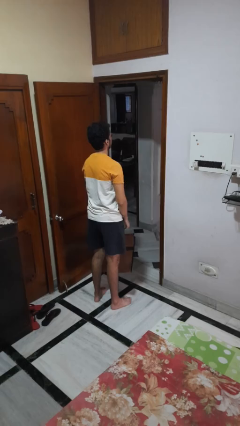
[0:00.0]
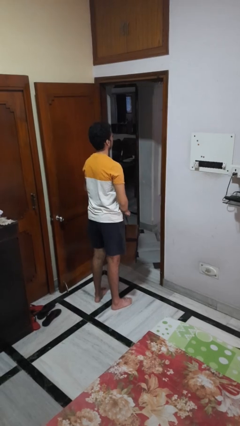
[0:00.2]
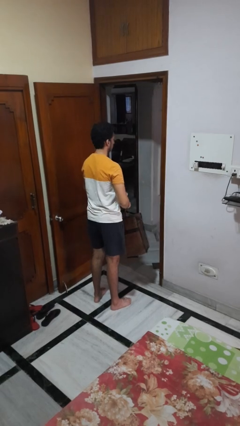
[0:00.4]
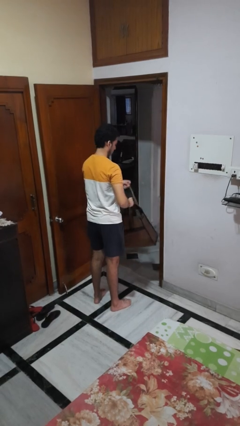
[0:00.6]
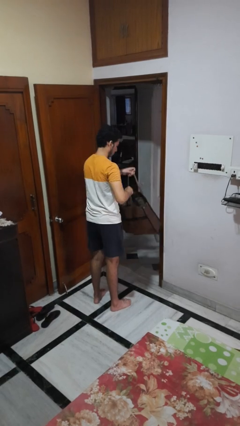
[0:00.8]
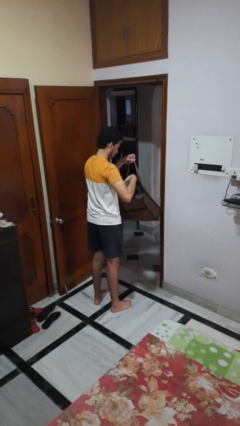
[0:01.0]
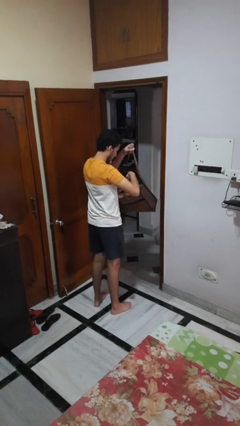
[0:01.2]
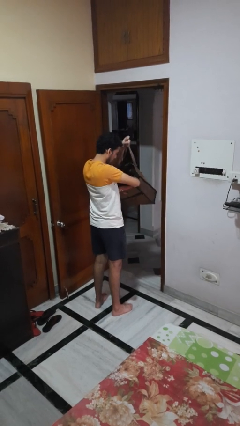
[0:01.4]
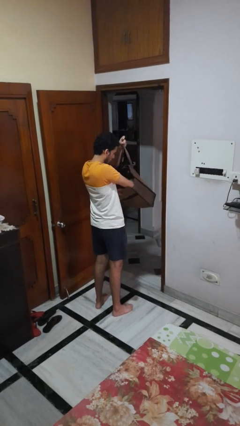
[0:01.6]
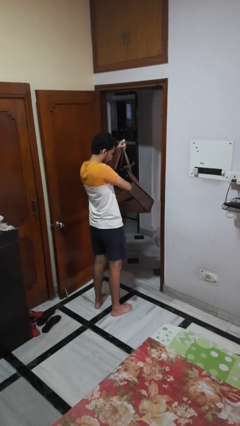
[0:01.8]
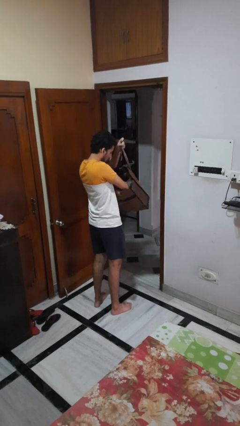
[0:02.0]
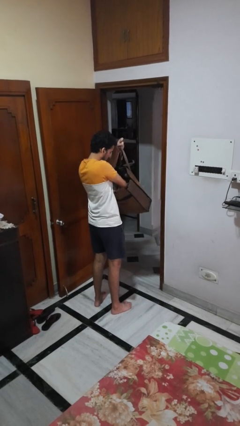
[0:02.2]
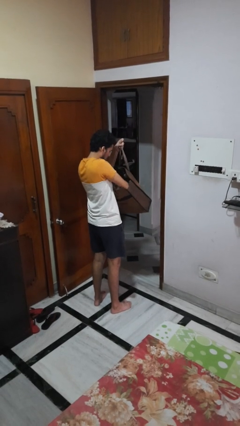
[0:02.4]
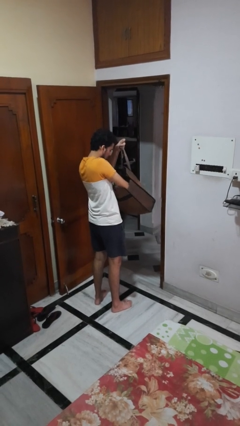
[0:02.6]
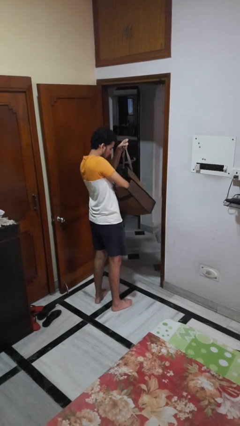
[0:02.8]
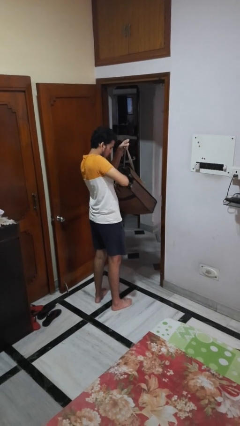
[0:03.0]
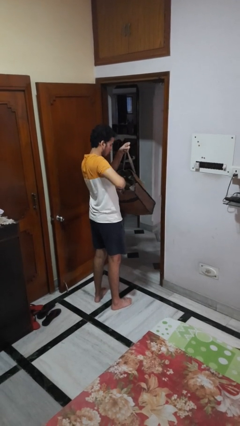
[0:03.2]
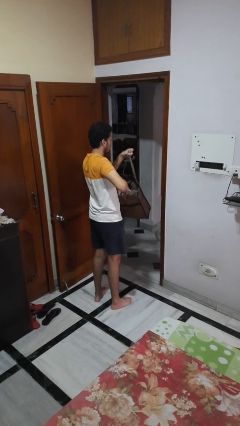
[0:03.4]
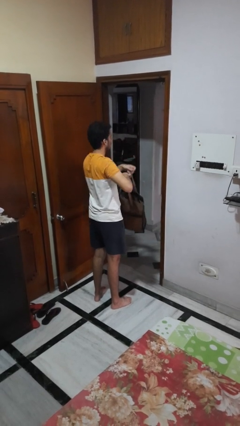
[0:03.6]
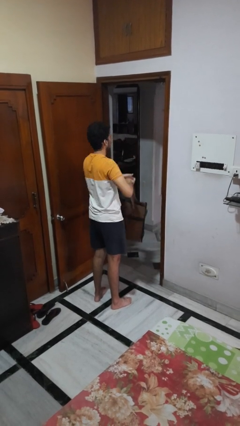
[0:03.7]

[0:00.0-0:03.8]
person searches in bag

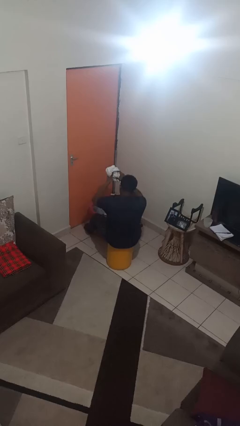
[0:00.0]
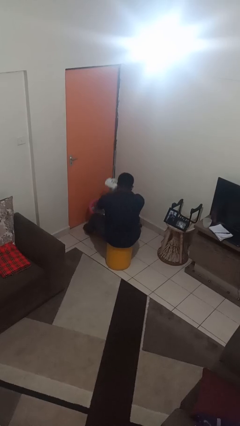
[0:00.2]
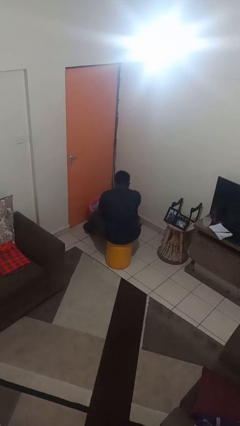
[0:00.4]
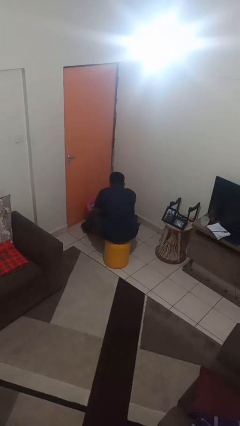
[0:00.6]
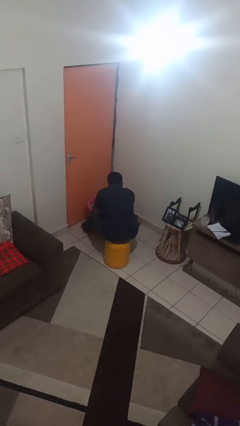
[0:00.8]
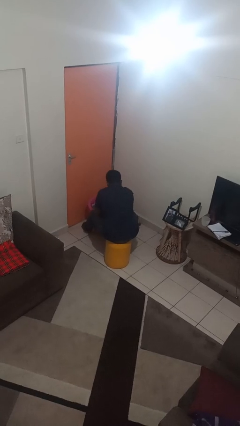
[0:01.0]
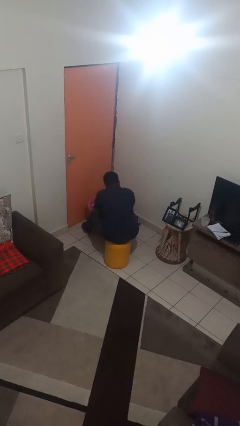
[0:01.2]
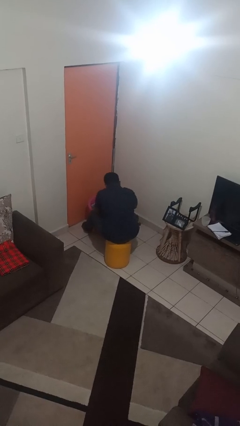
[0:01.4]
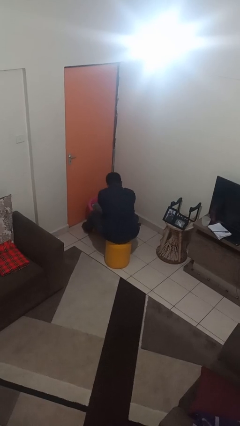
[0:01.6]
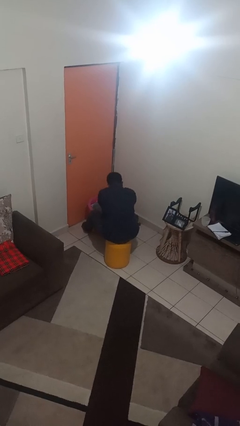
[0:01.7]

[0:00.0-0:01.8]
person puts object into basket

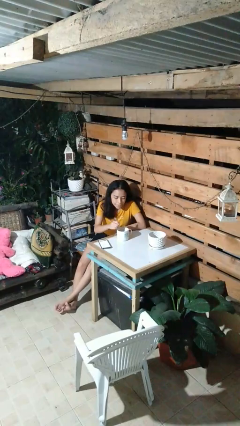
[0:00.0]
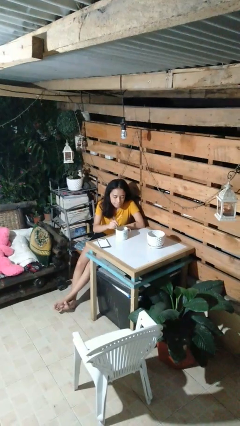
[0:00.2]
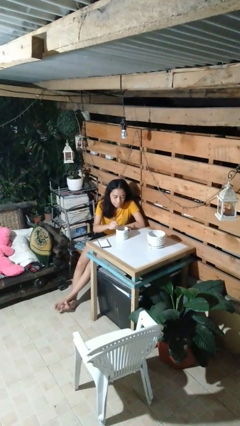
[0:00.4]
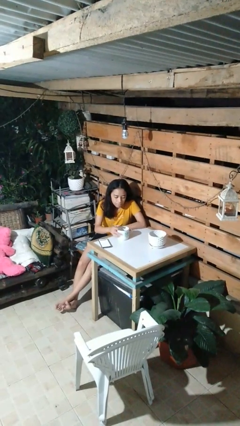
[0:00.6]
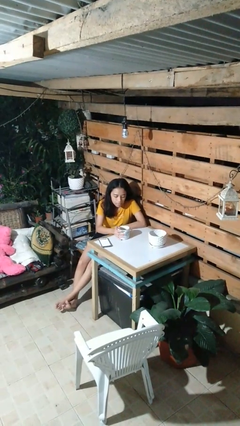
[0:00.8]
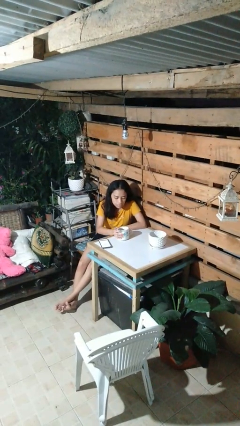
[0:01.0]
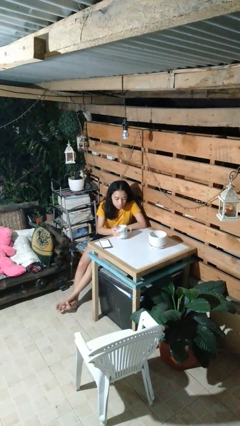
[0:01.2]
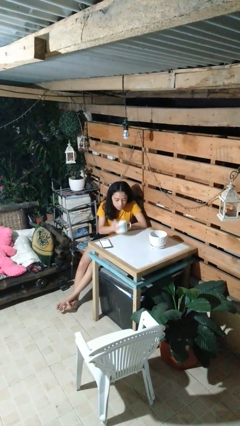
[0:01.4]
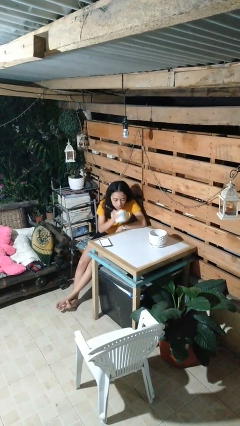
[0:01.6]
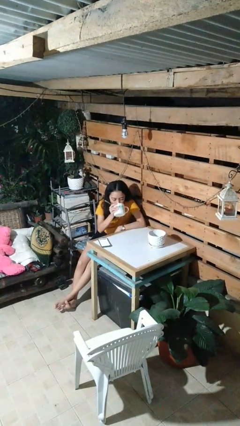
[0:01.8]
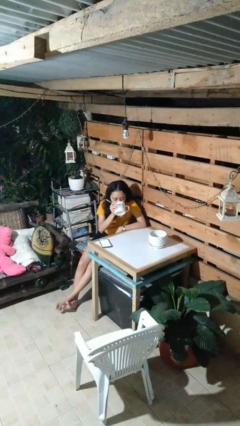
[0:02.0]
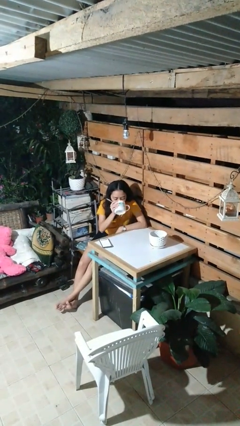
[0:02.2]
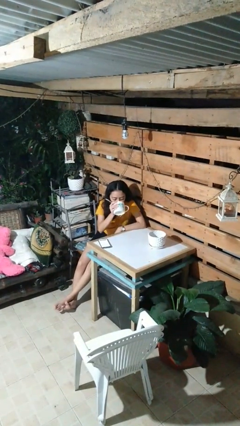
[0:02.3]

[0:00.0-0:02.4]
person drinks from mug

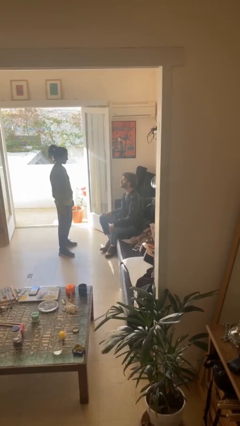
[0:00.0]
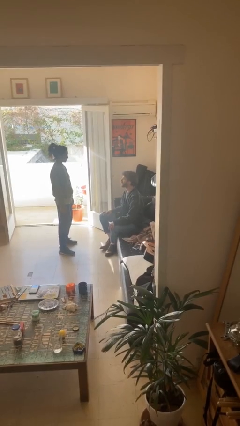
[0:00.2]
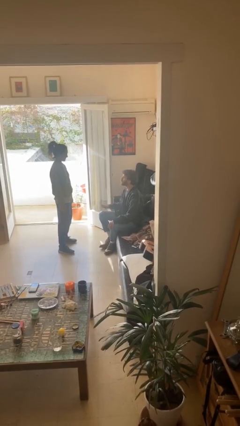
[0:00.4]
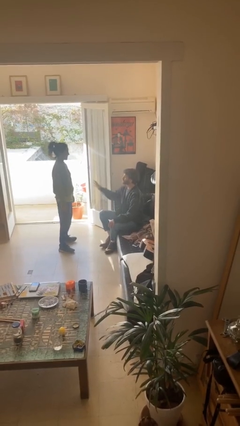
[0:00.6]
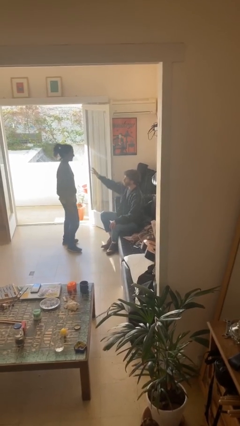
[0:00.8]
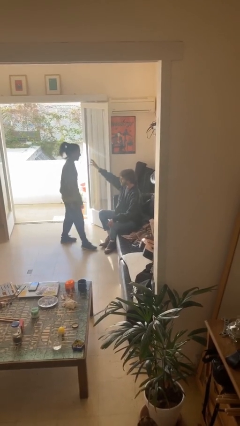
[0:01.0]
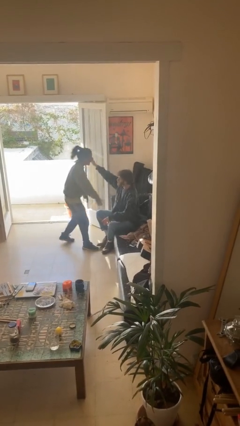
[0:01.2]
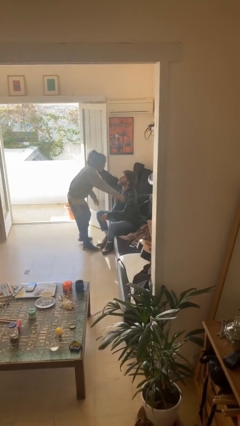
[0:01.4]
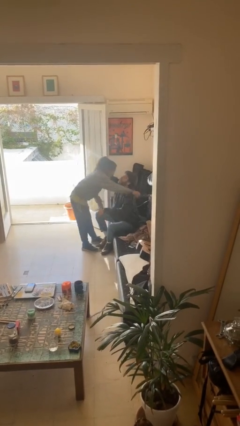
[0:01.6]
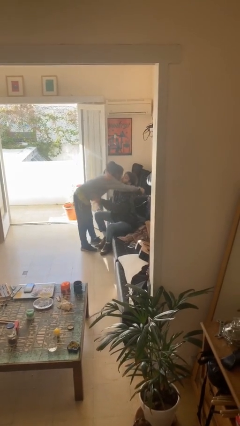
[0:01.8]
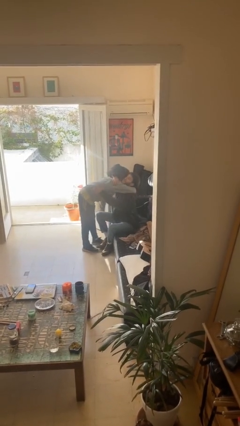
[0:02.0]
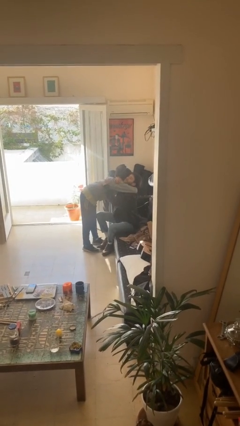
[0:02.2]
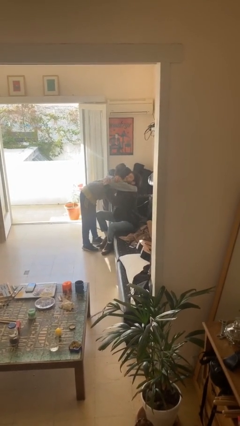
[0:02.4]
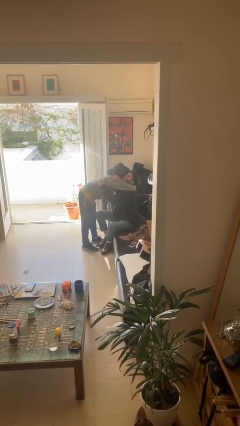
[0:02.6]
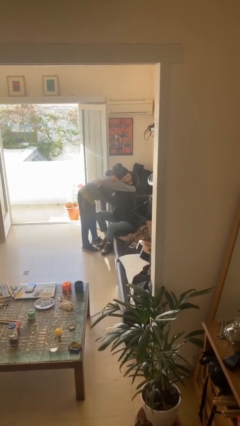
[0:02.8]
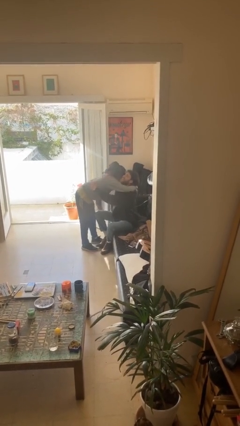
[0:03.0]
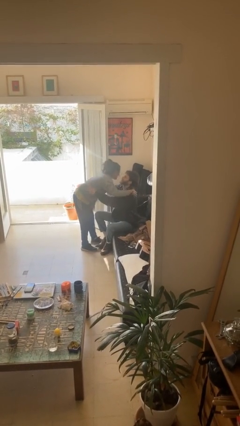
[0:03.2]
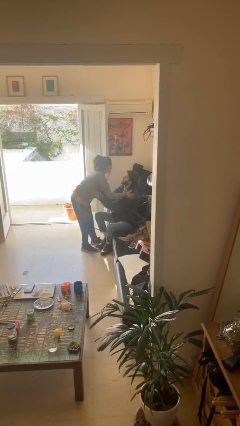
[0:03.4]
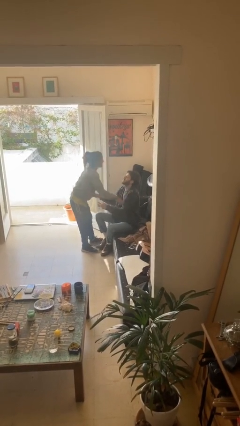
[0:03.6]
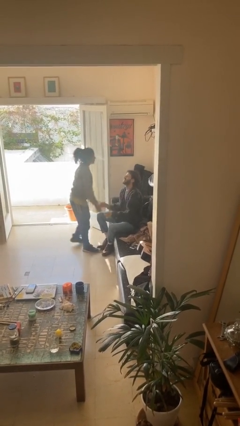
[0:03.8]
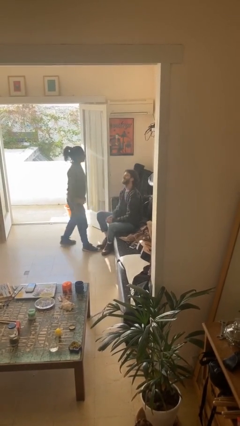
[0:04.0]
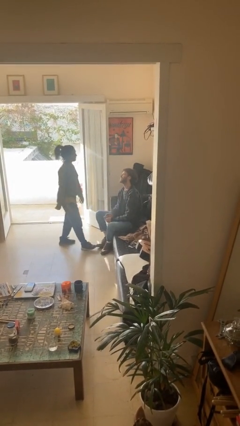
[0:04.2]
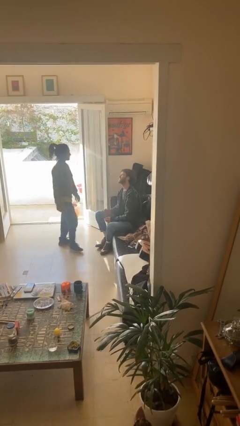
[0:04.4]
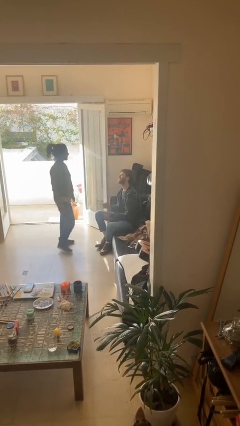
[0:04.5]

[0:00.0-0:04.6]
person embraces person

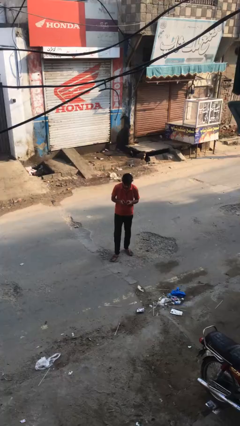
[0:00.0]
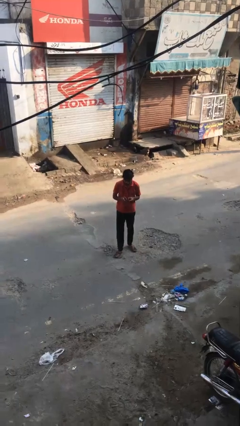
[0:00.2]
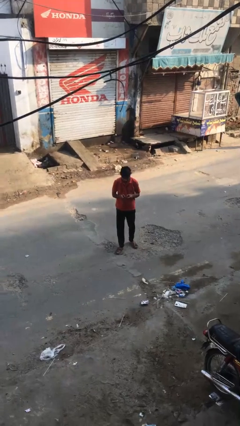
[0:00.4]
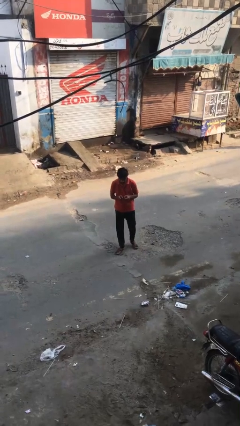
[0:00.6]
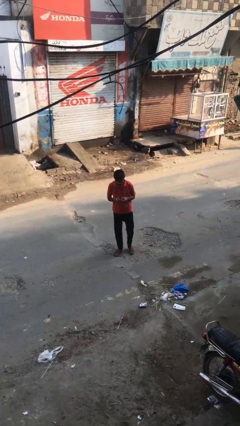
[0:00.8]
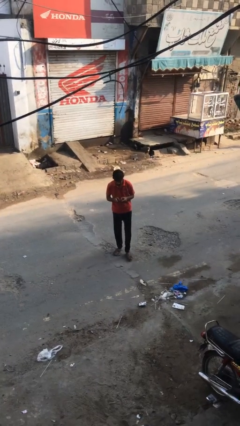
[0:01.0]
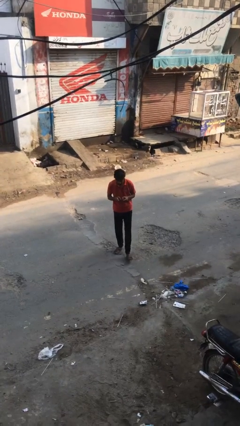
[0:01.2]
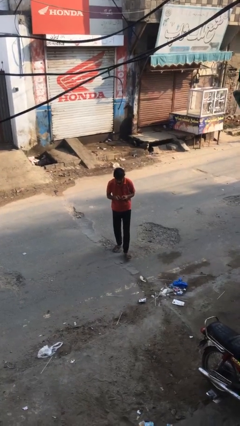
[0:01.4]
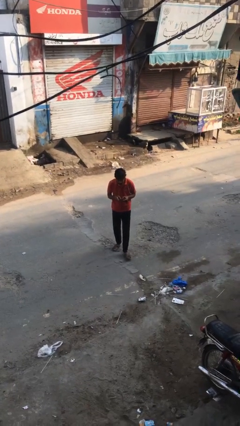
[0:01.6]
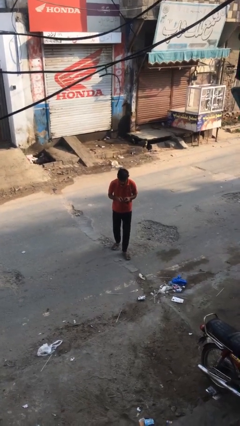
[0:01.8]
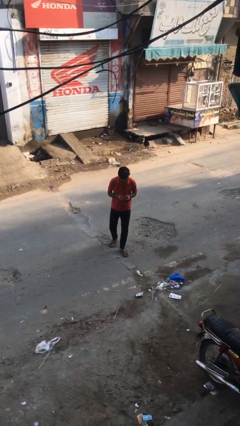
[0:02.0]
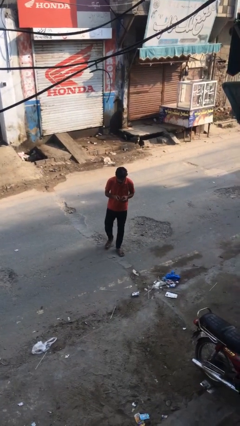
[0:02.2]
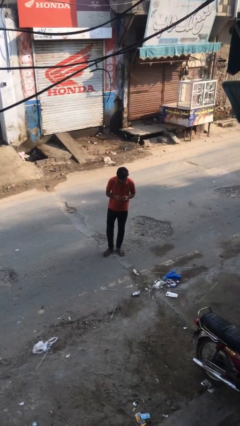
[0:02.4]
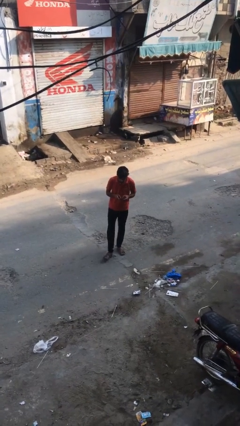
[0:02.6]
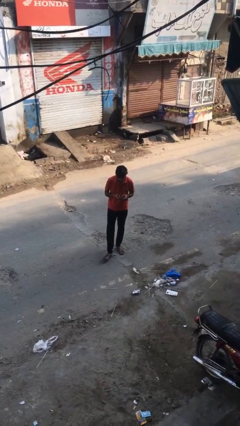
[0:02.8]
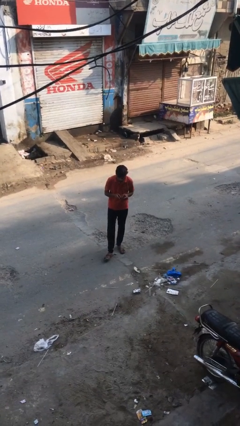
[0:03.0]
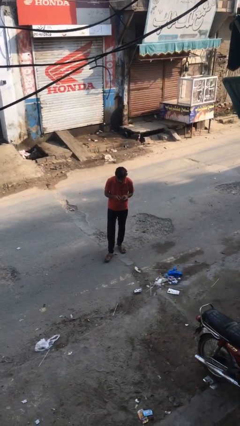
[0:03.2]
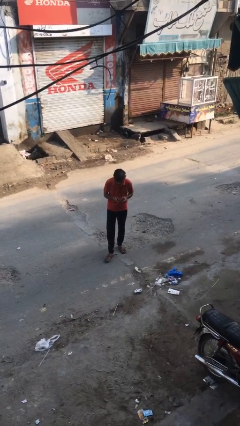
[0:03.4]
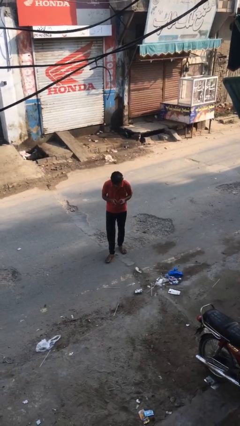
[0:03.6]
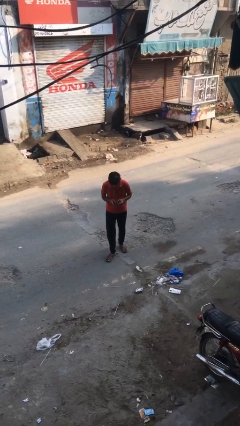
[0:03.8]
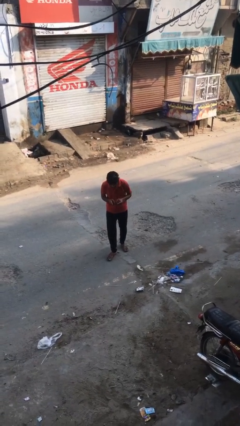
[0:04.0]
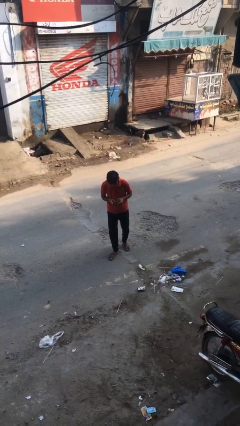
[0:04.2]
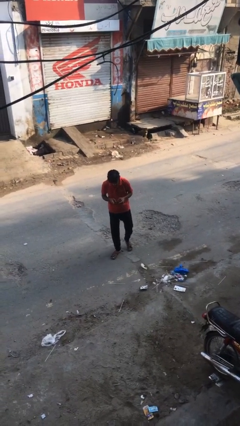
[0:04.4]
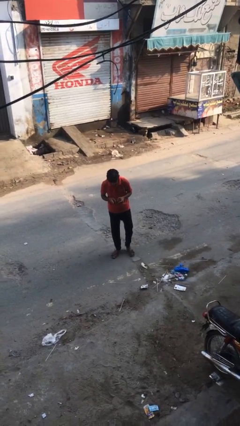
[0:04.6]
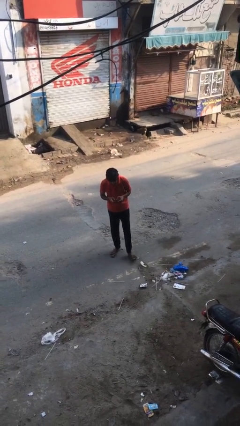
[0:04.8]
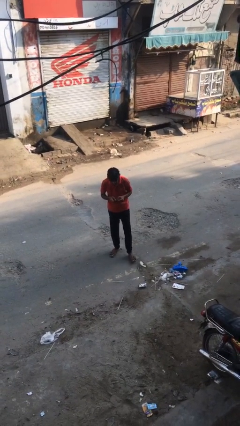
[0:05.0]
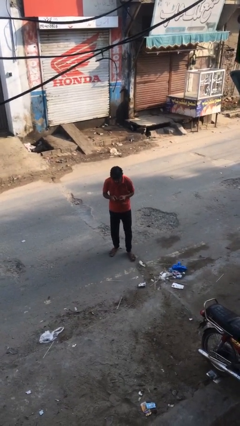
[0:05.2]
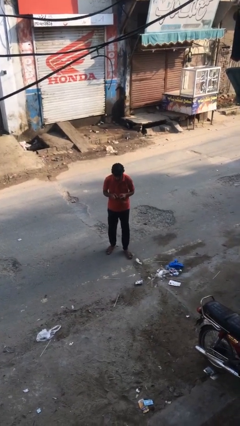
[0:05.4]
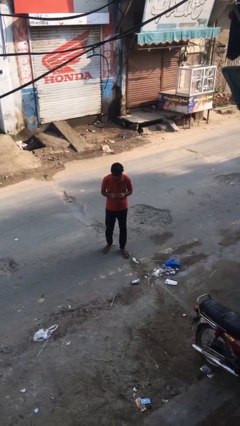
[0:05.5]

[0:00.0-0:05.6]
person texts on phone
